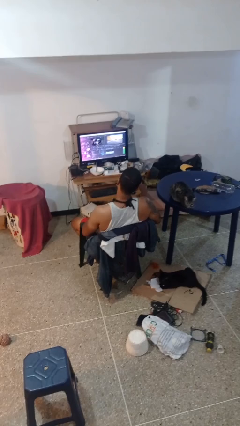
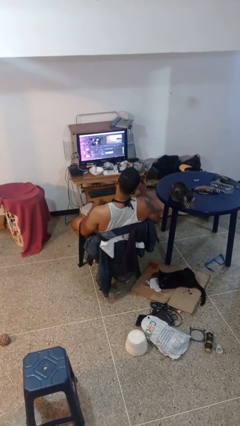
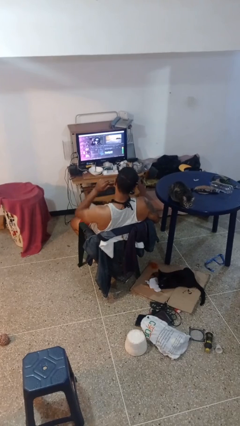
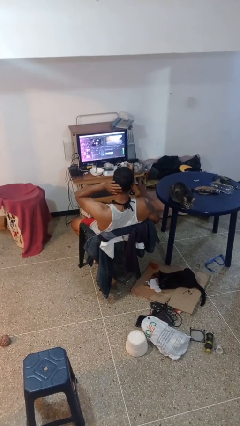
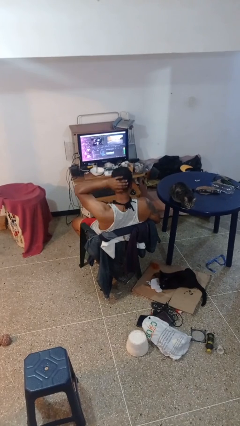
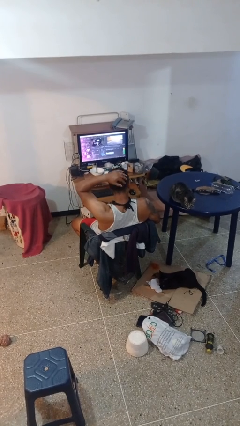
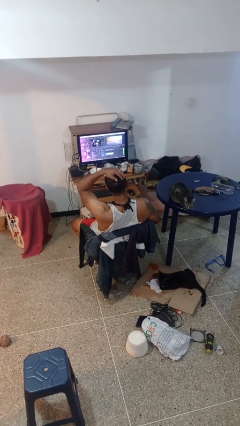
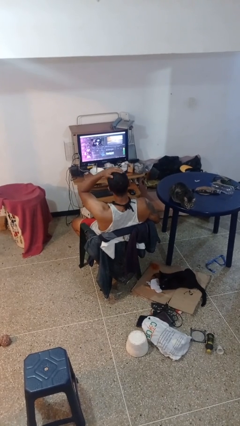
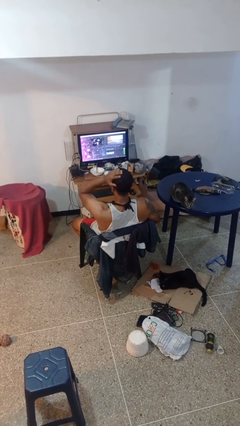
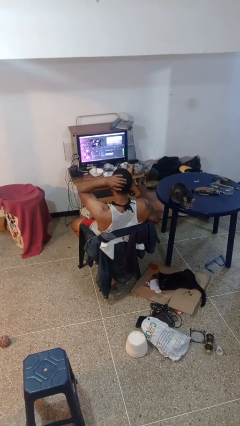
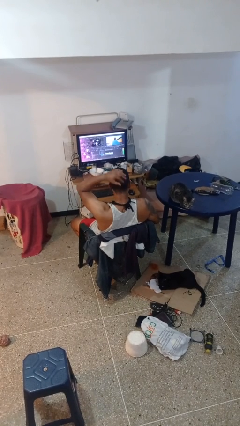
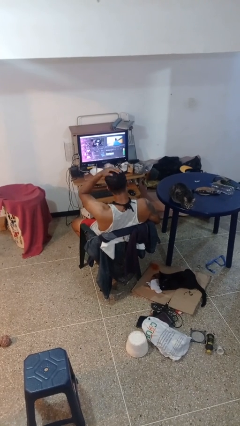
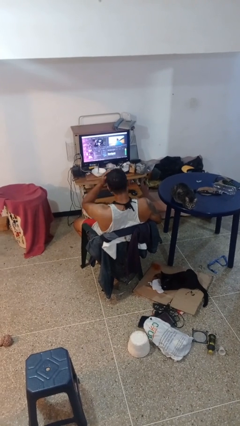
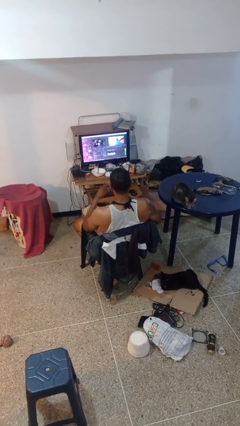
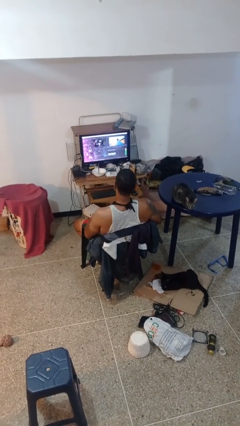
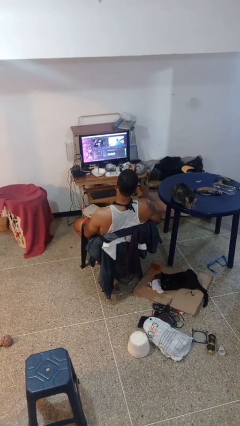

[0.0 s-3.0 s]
person strokes hair

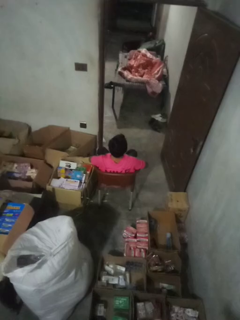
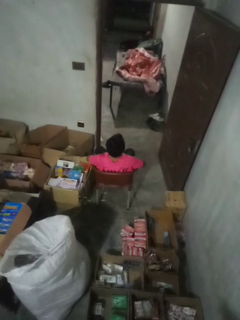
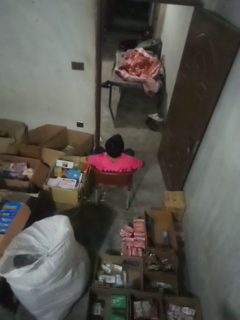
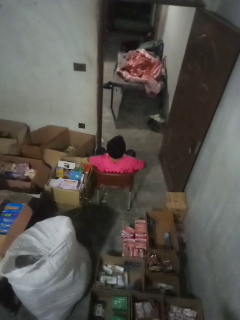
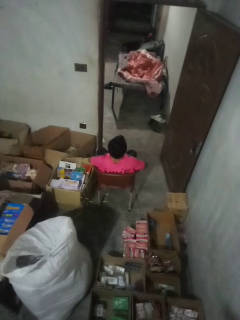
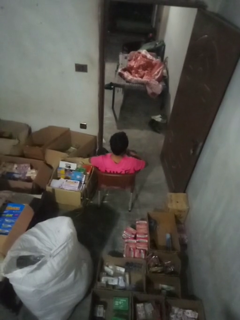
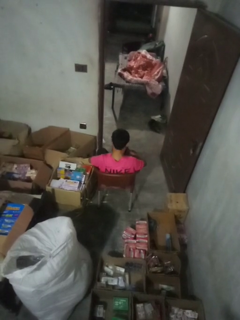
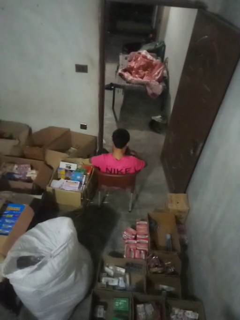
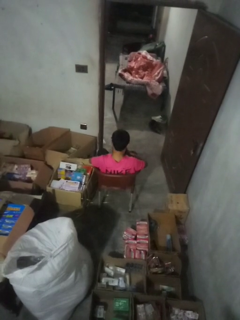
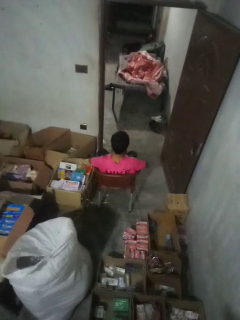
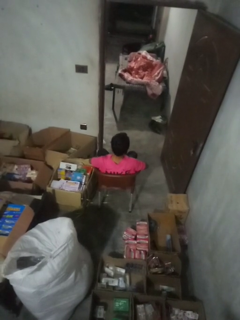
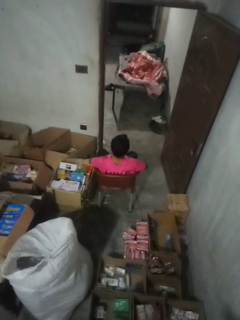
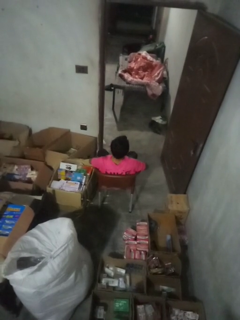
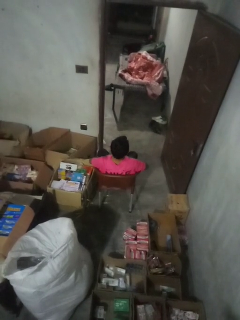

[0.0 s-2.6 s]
person sneezes into hand

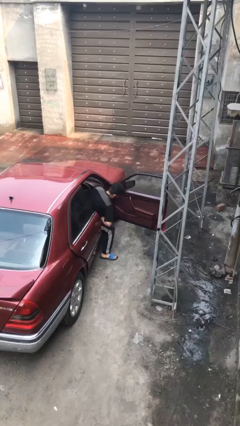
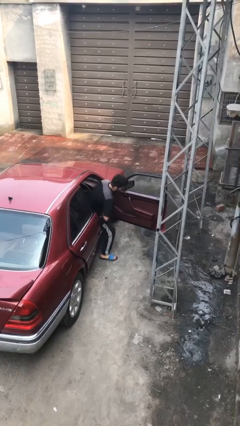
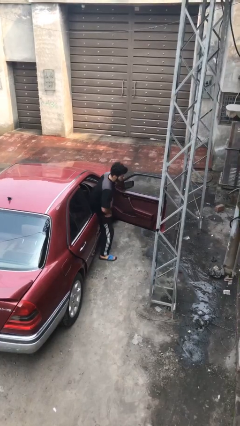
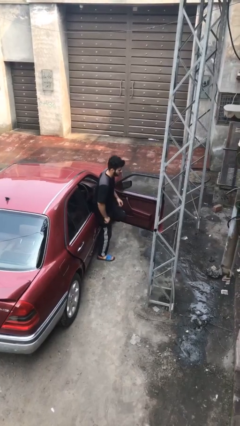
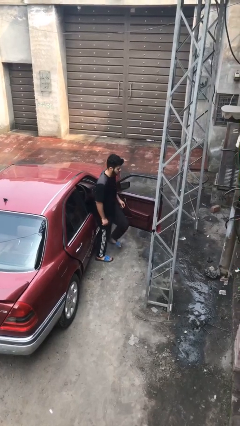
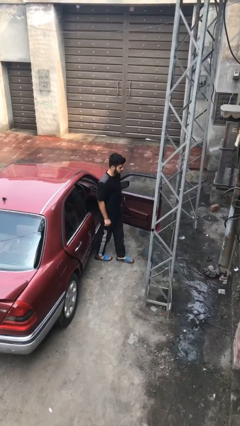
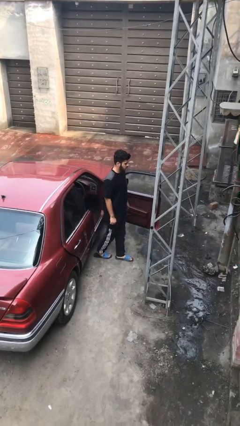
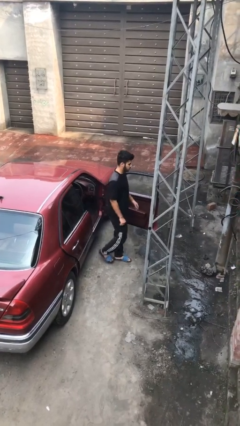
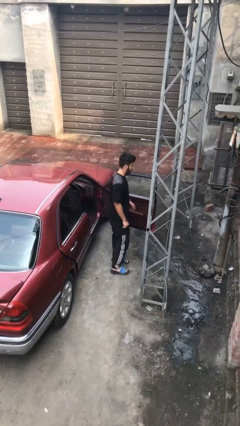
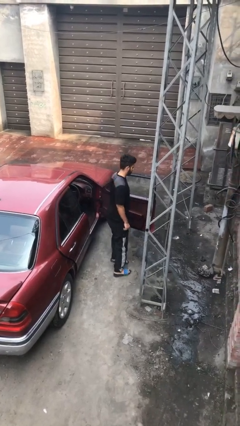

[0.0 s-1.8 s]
person exits car

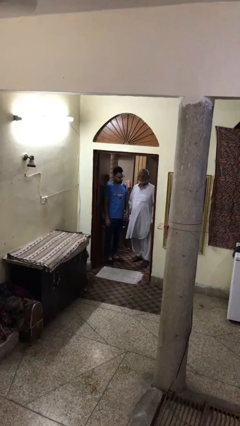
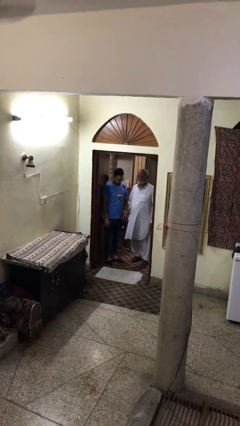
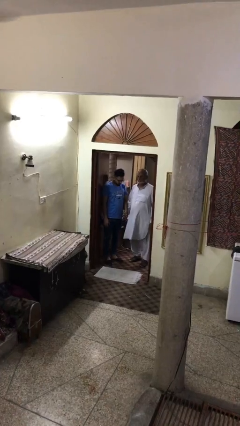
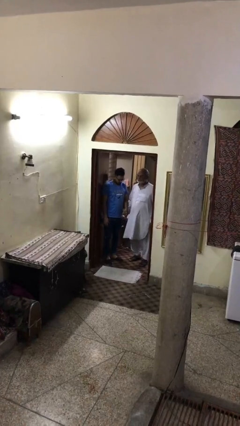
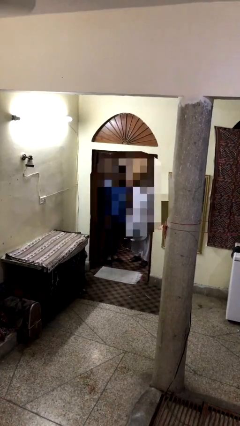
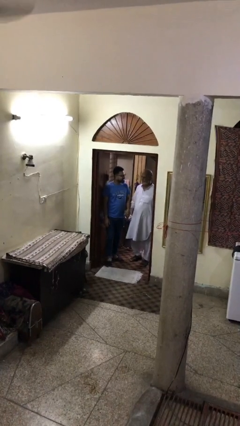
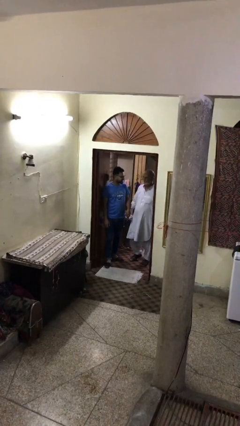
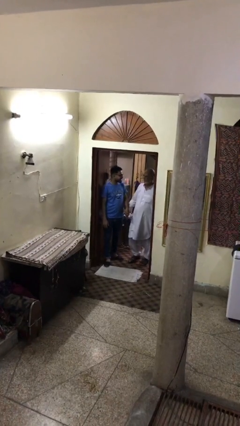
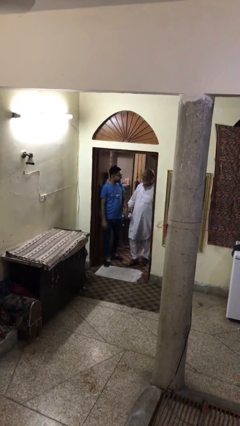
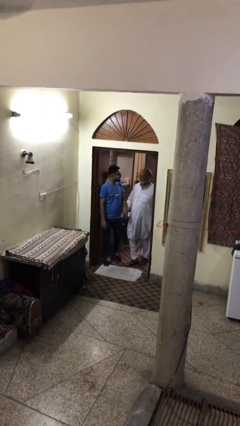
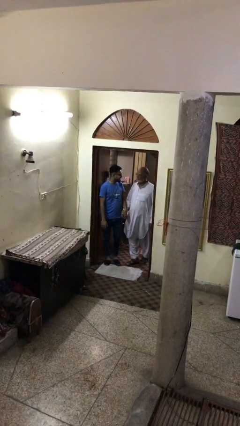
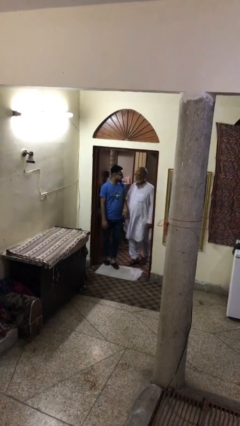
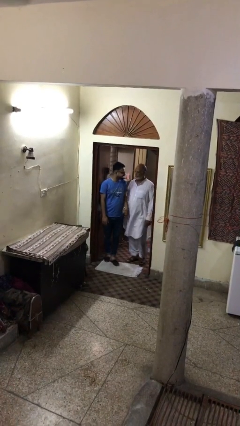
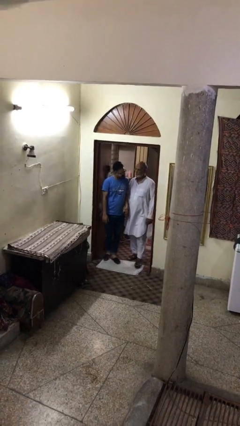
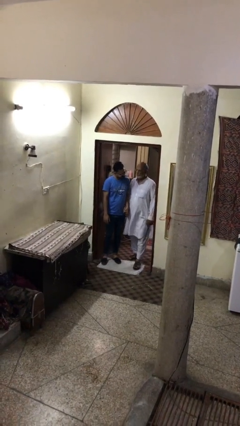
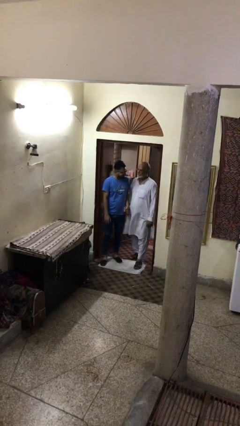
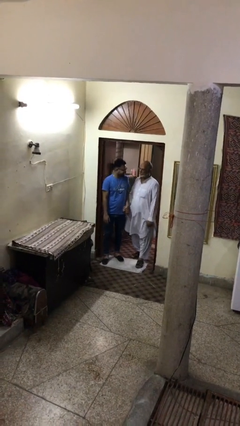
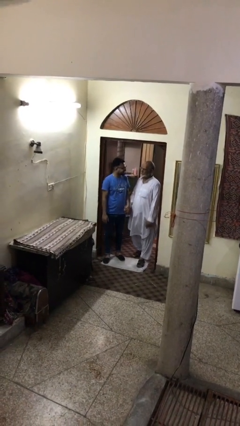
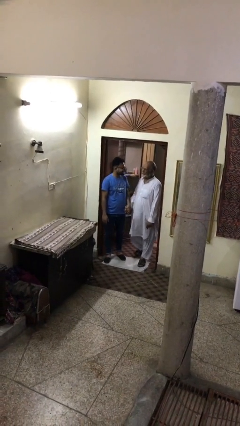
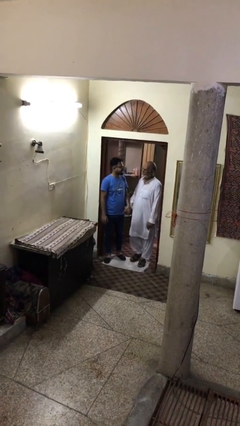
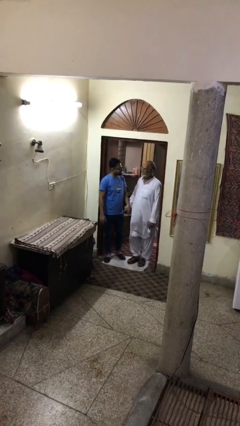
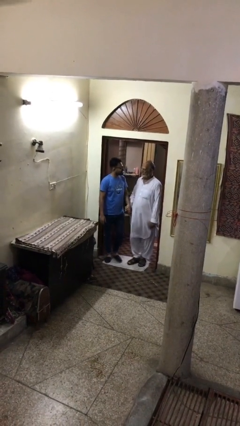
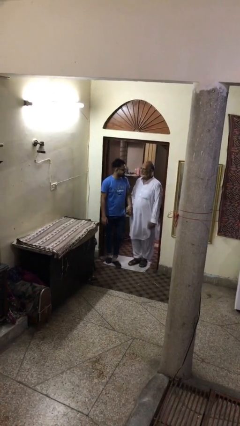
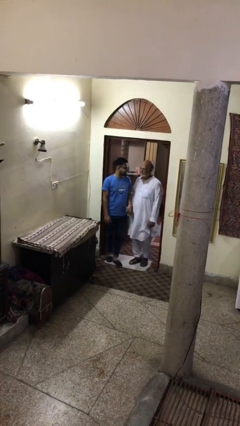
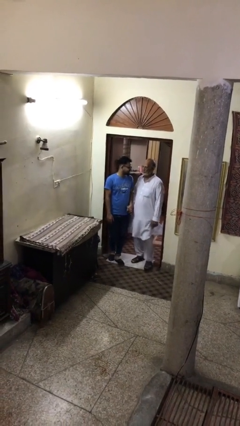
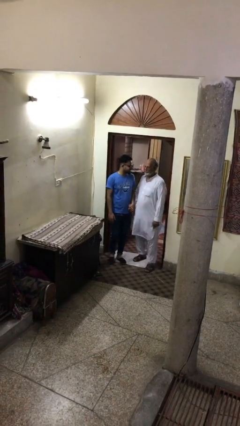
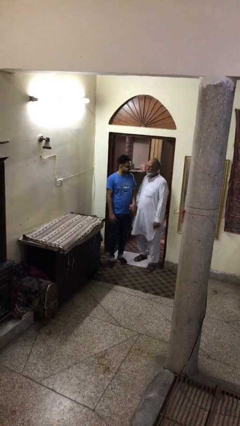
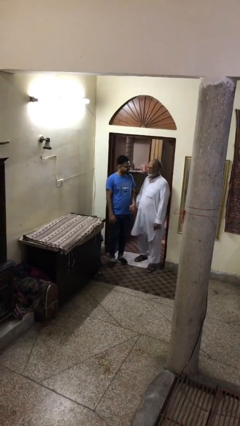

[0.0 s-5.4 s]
person holds hand

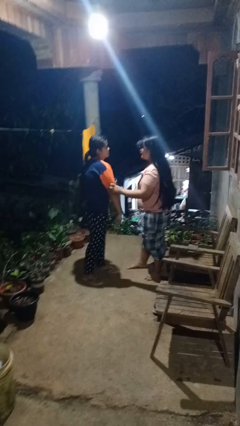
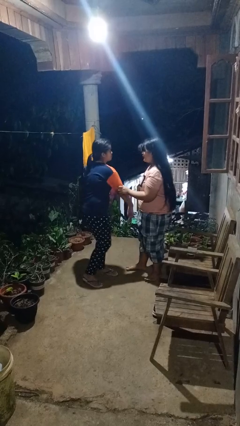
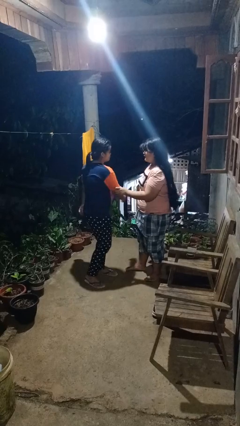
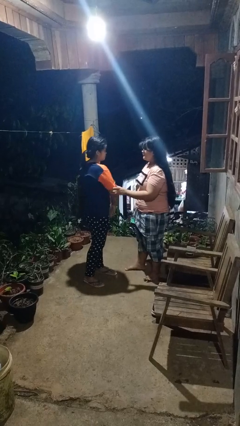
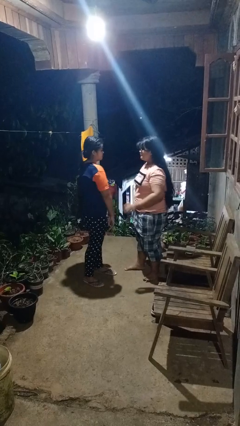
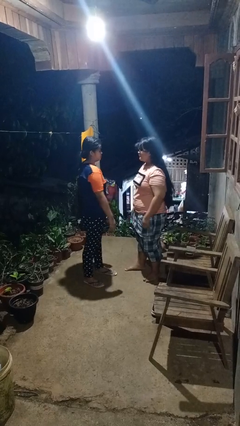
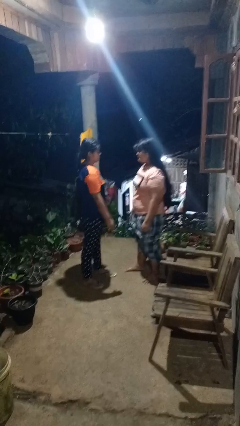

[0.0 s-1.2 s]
person grabs person by bicep

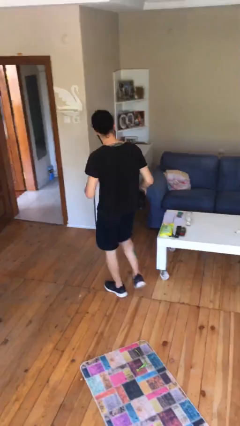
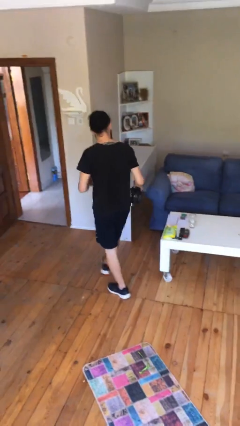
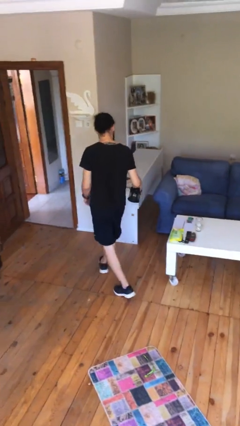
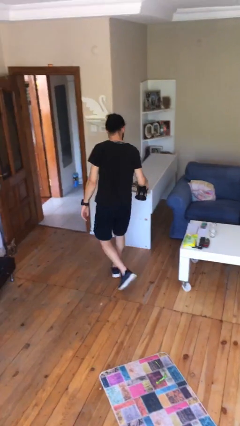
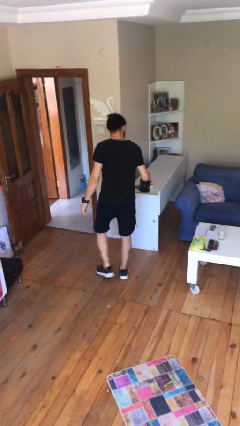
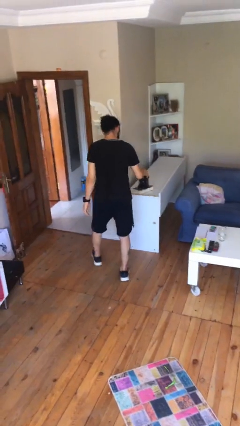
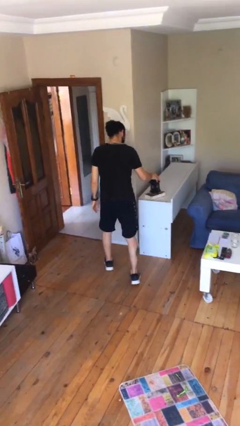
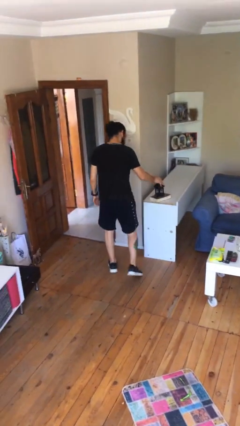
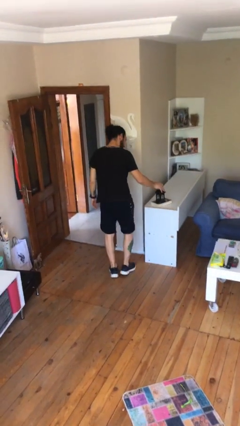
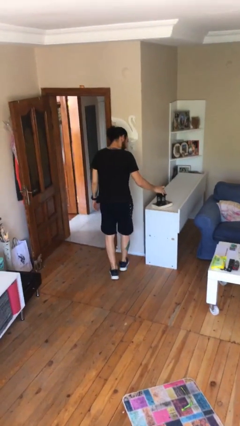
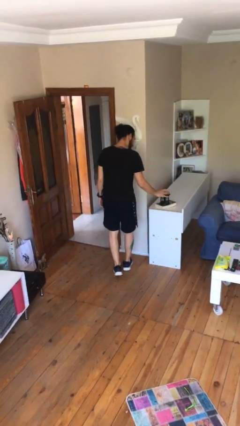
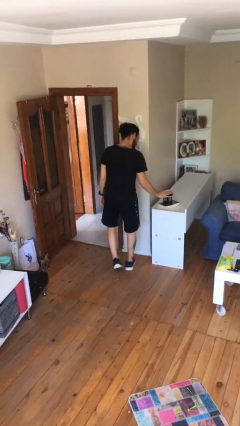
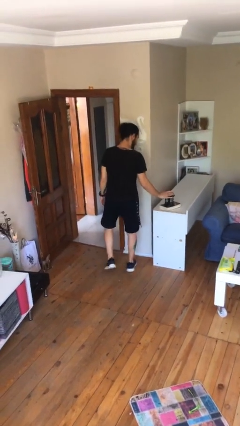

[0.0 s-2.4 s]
person puts down object on table

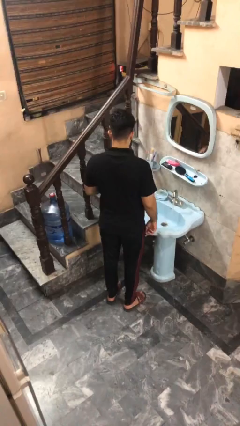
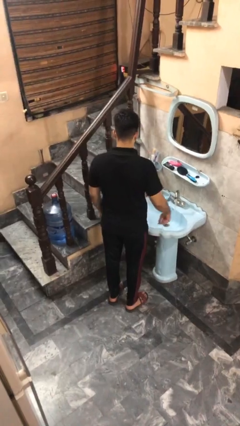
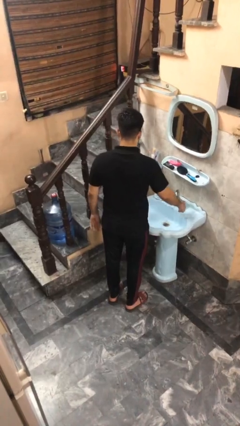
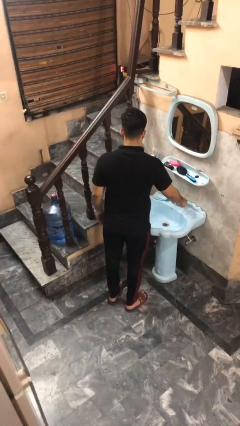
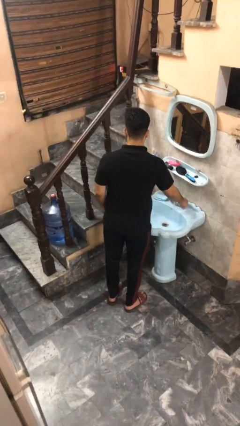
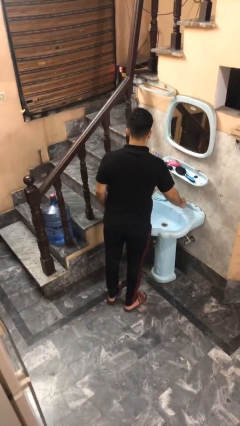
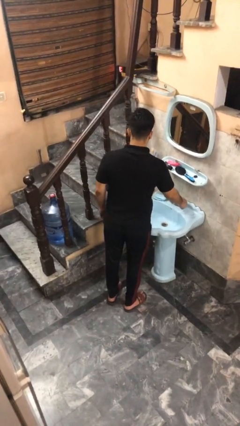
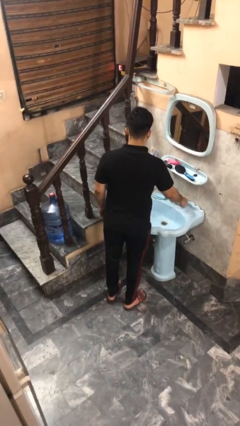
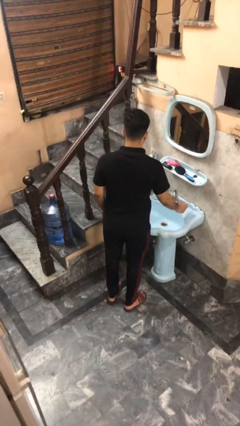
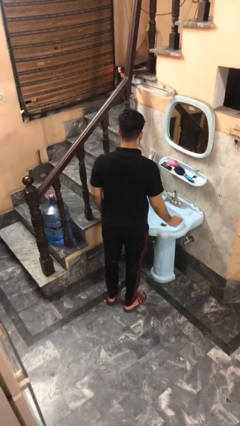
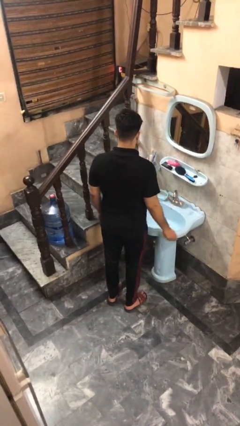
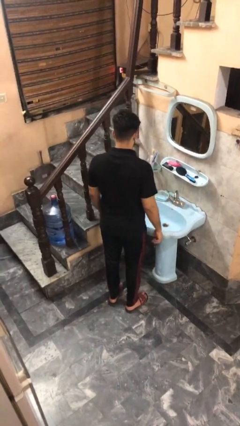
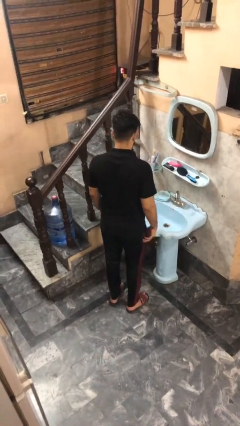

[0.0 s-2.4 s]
person turns off faucet
